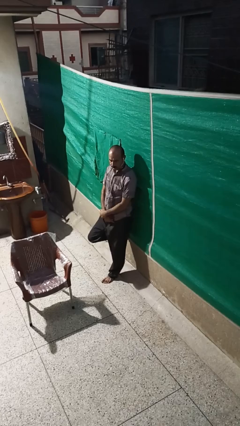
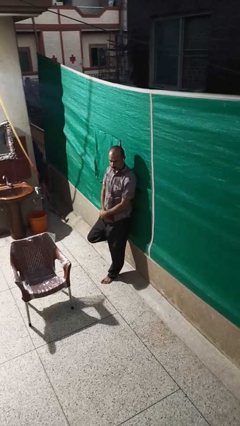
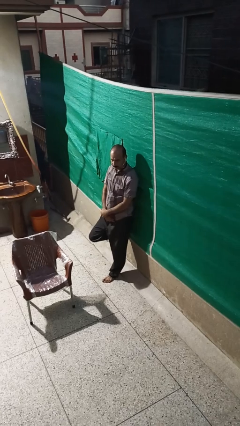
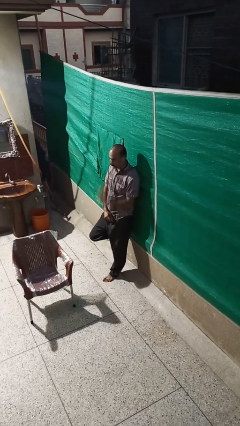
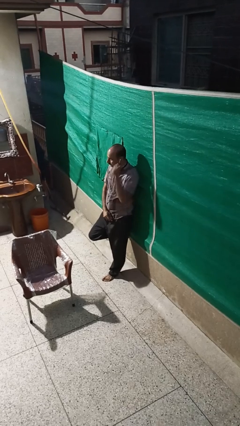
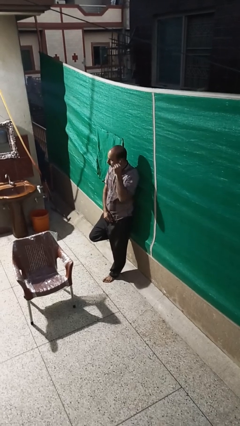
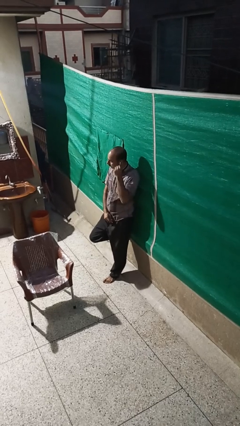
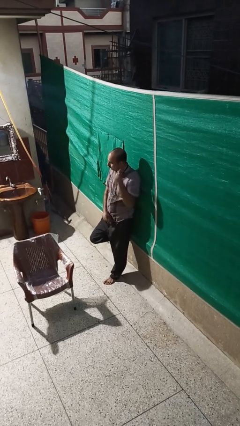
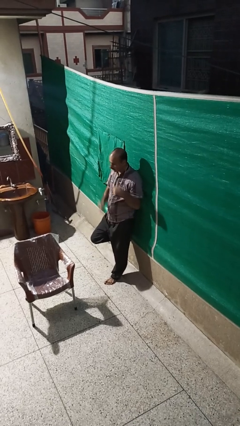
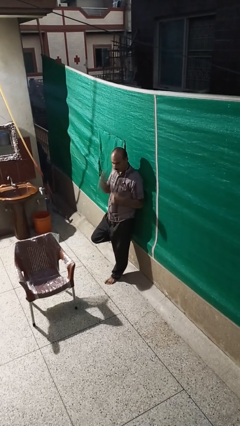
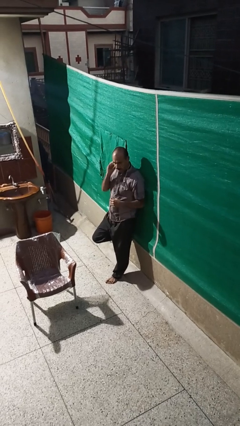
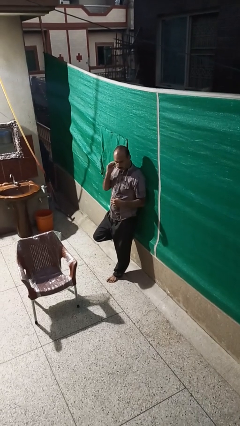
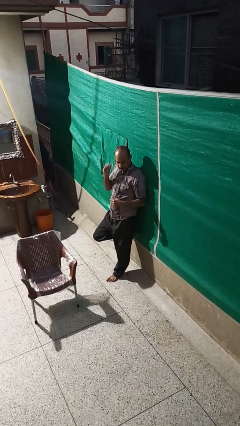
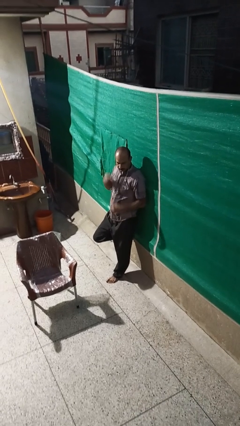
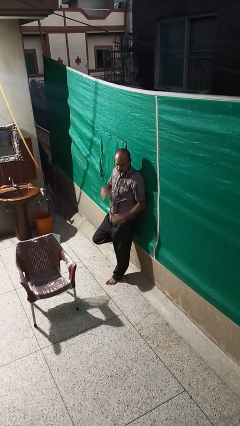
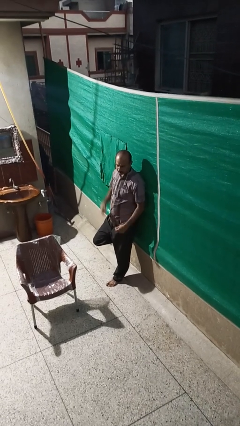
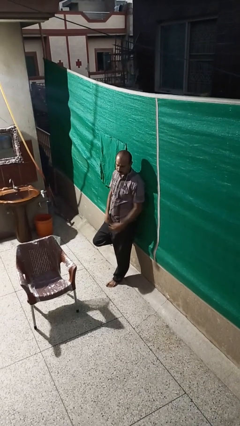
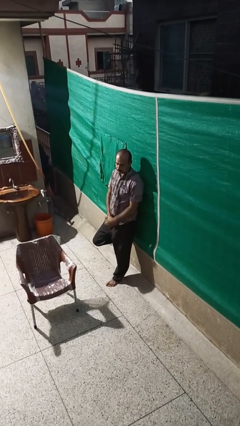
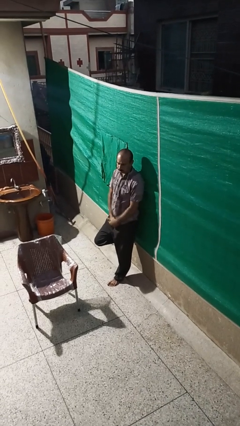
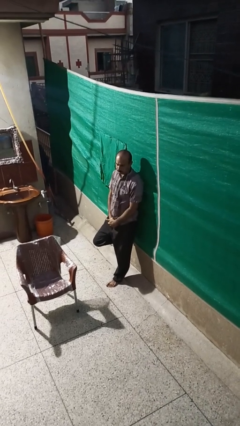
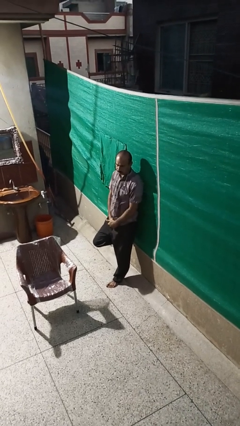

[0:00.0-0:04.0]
person takes off headphones

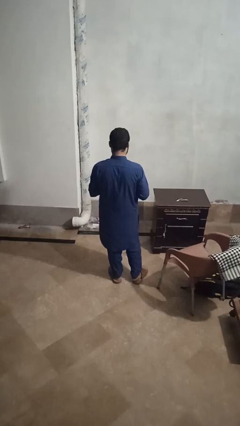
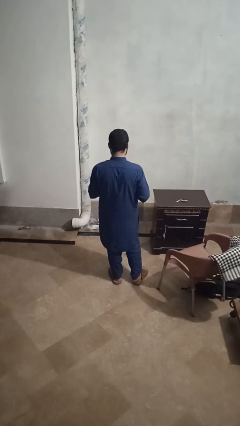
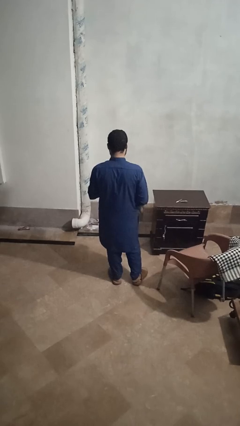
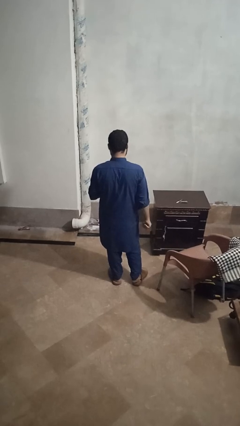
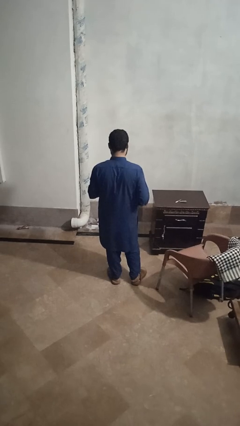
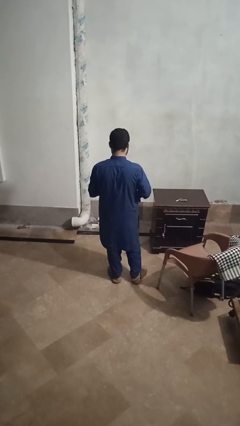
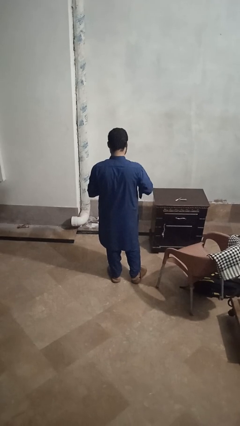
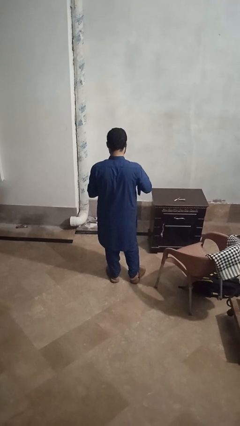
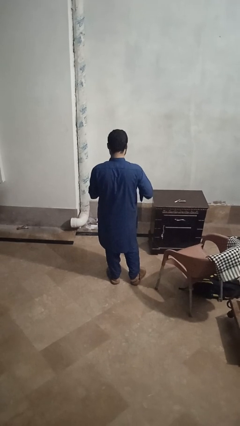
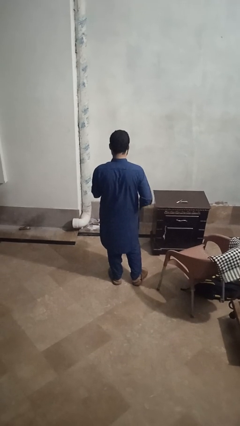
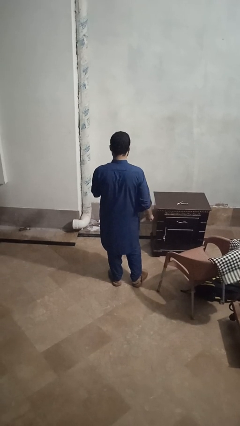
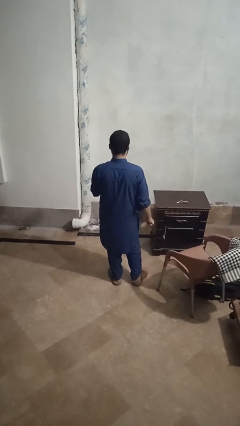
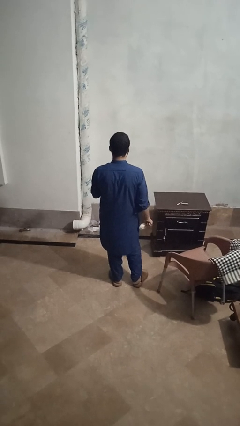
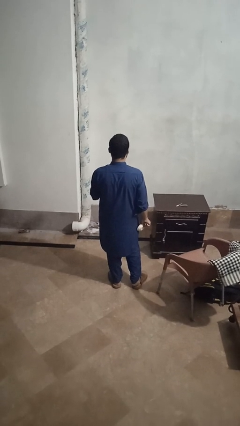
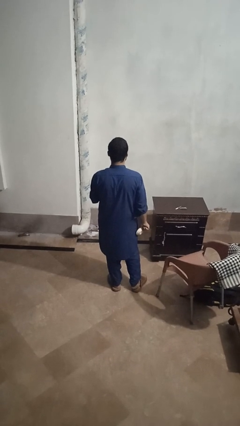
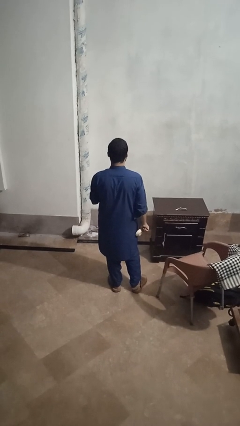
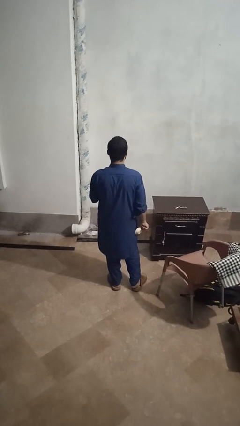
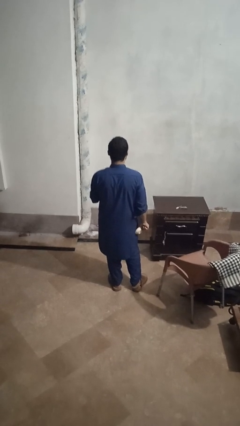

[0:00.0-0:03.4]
person opens beverage can

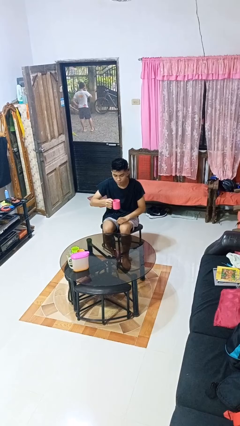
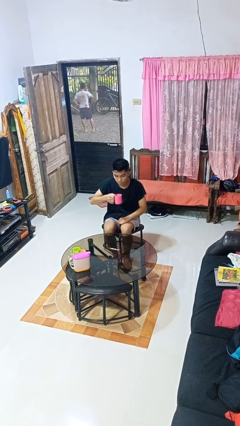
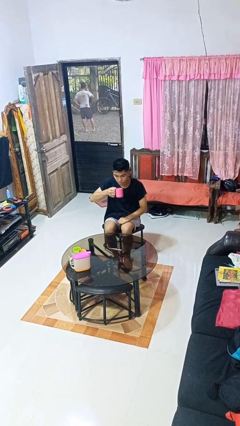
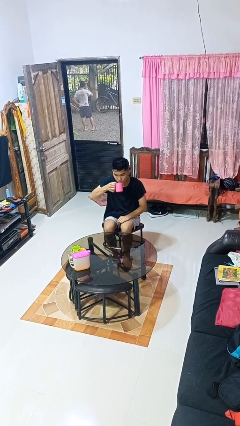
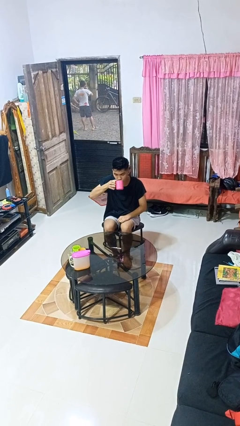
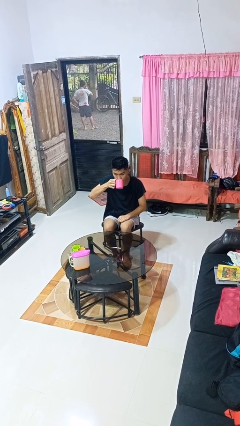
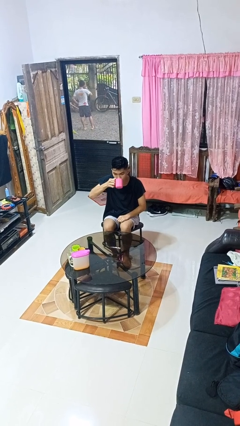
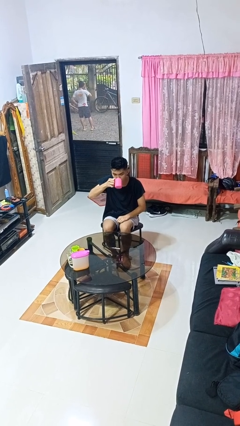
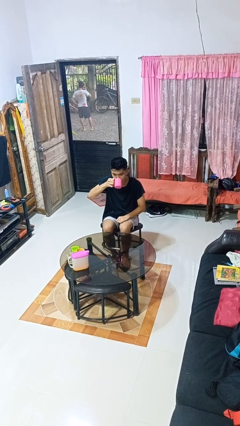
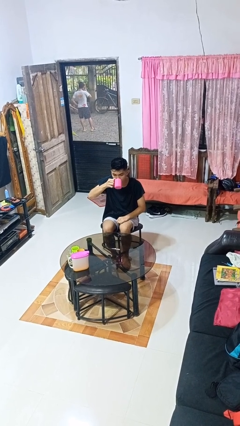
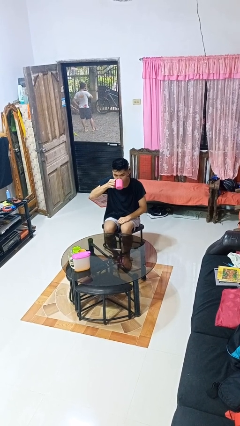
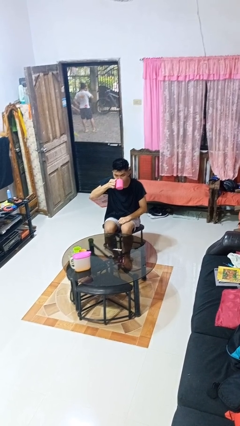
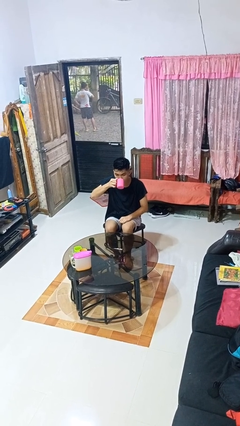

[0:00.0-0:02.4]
person drinks from mug

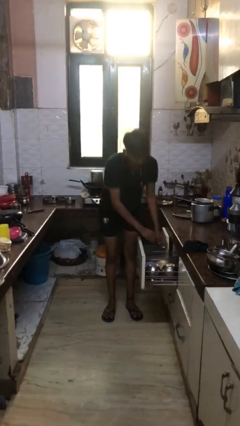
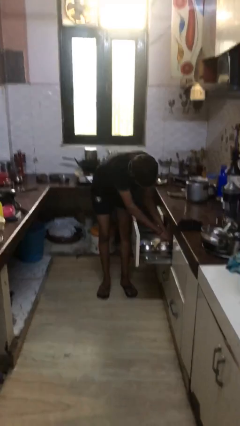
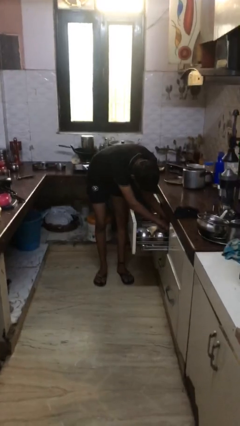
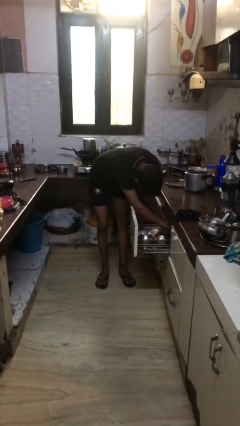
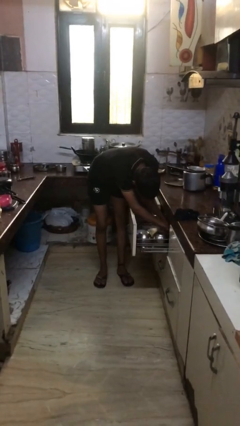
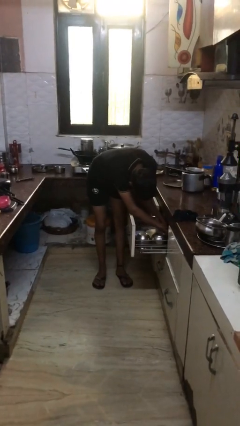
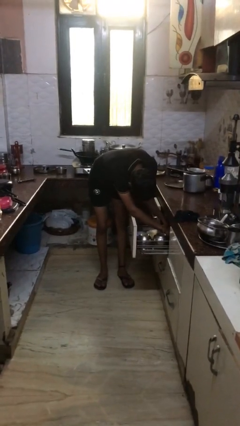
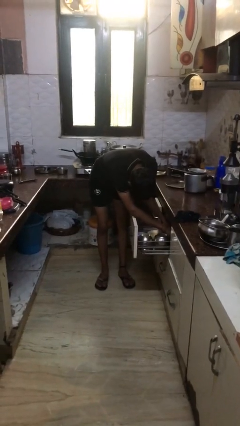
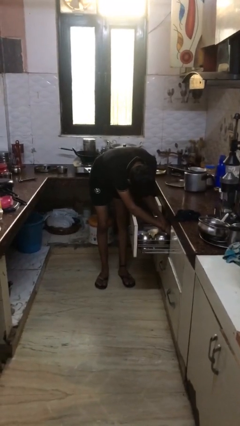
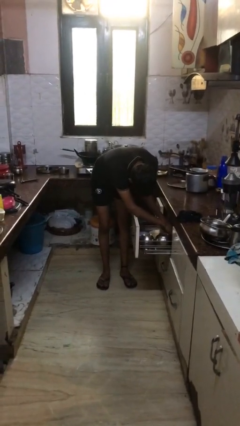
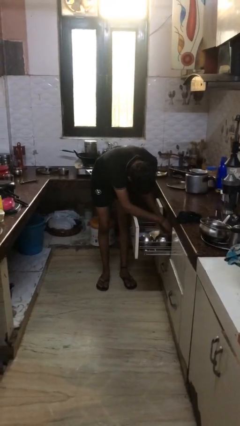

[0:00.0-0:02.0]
person searches in kitchen drawer

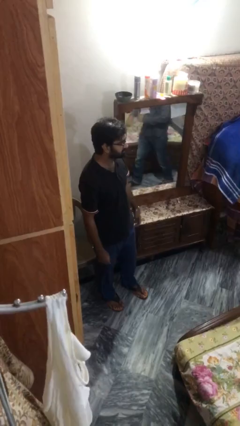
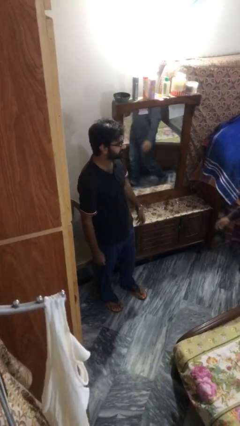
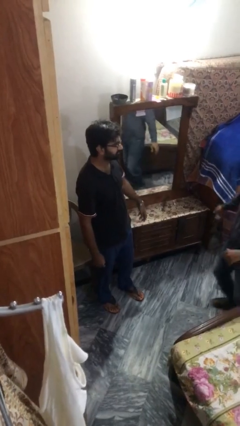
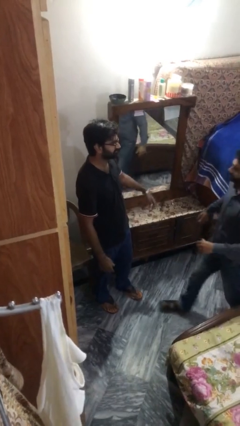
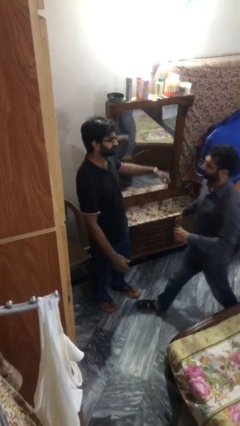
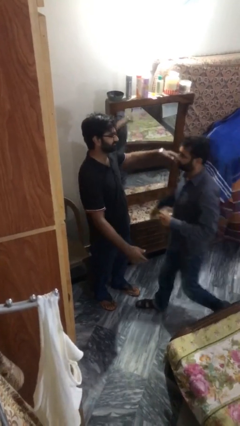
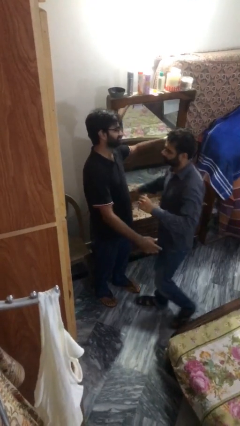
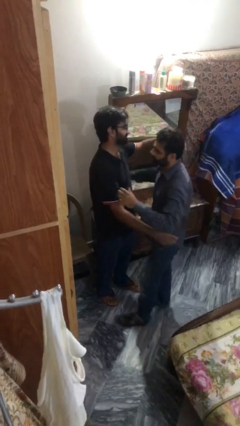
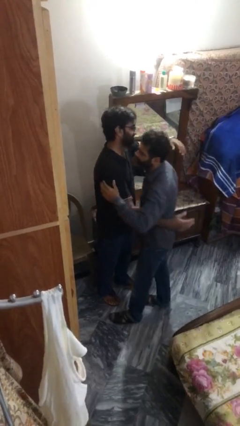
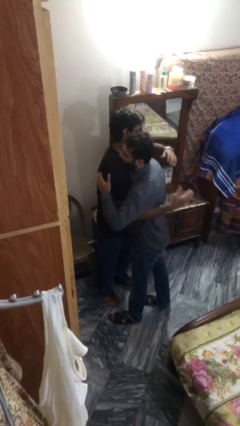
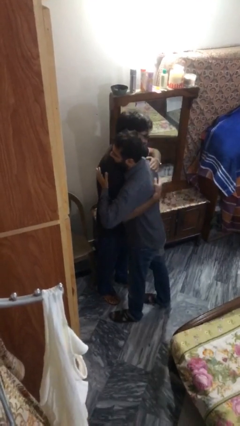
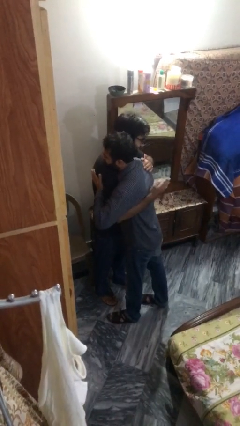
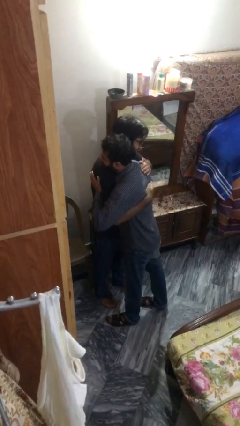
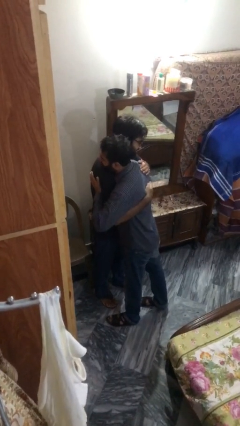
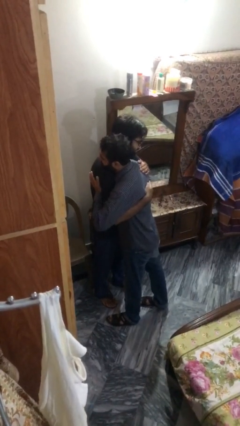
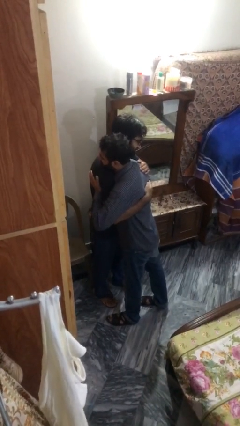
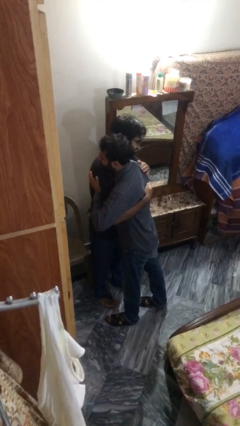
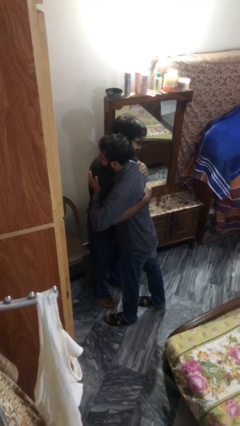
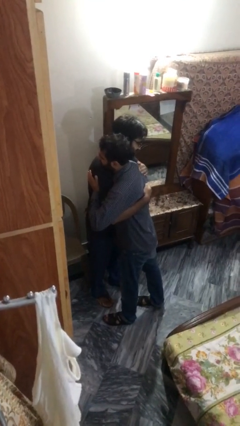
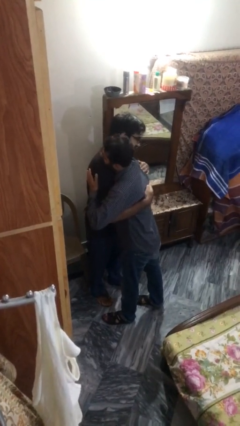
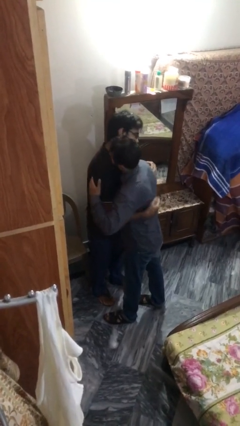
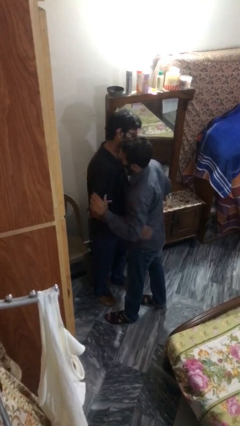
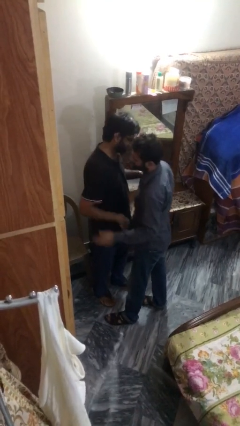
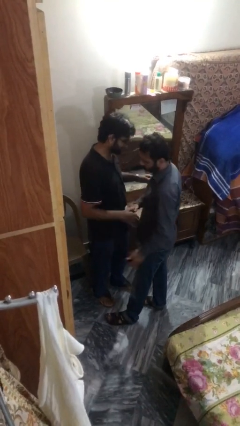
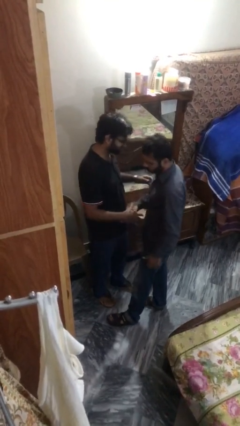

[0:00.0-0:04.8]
person embraces person

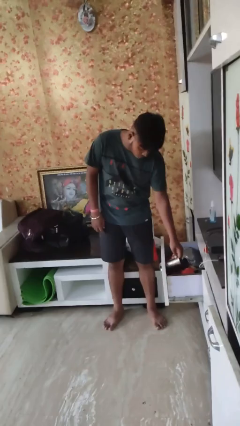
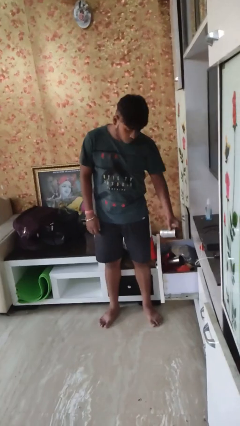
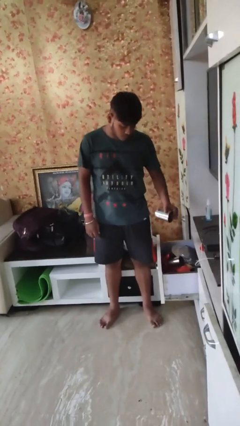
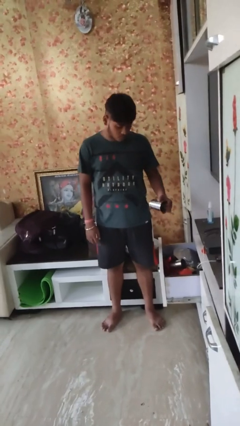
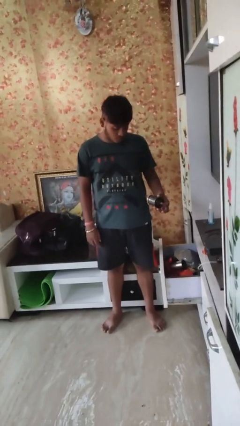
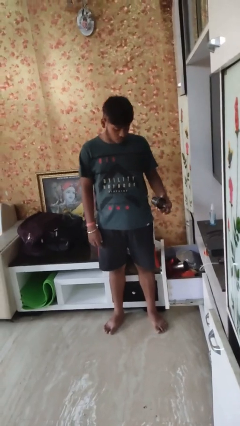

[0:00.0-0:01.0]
person takes object from kitchen drawer

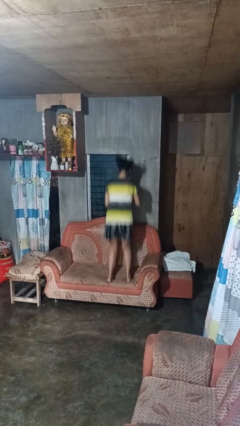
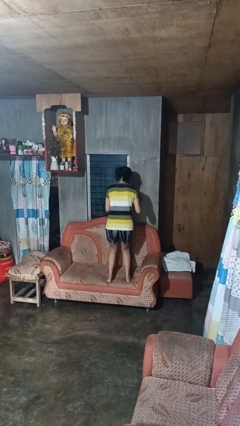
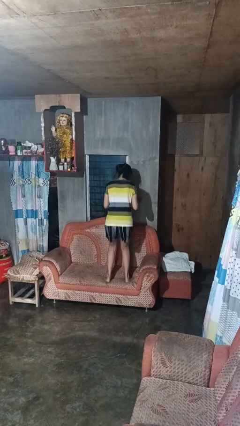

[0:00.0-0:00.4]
person jumps on couch
